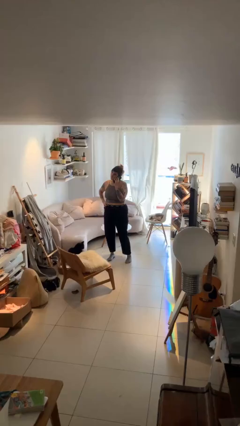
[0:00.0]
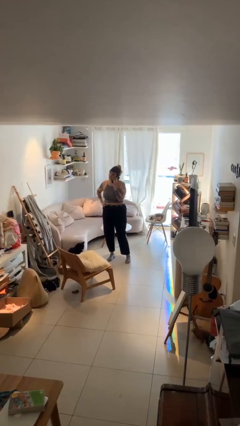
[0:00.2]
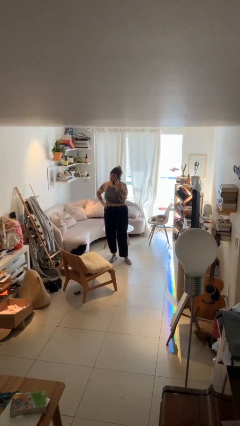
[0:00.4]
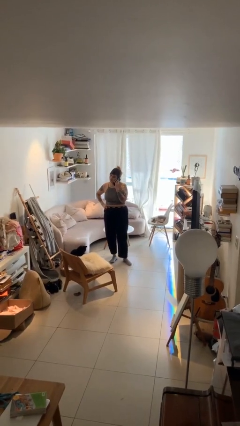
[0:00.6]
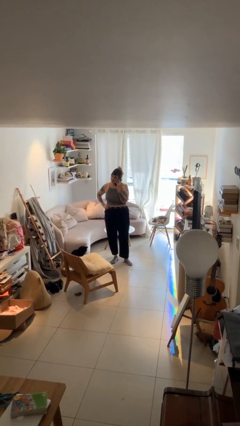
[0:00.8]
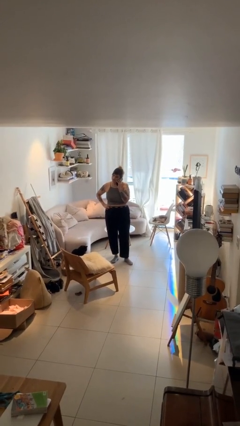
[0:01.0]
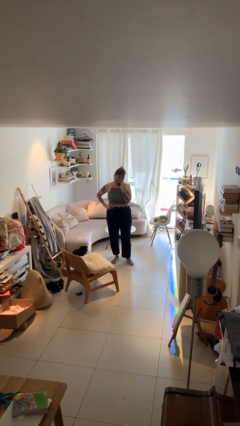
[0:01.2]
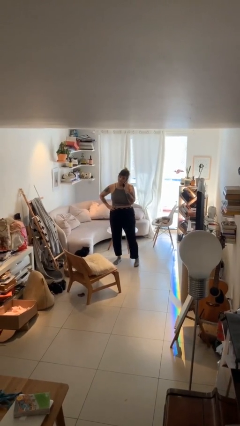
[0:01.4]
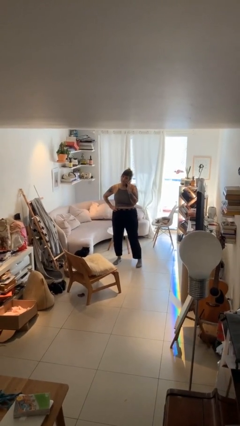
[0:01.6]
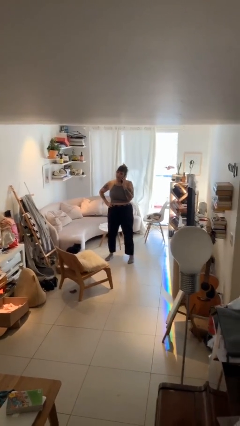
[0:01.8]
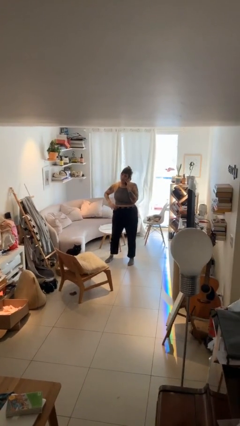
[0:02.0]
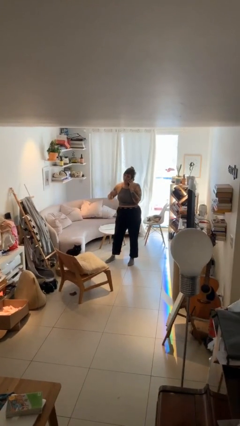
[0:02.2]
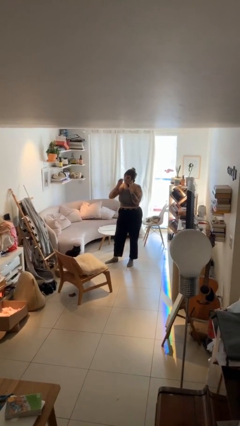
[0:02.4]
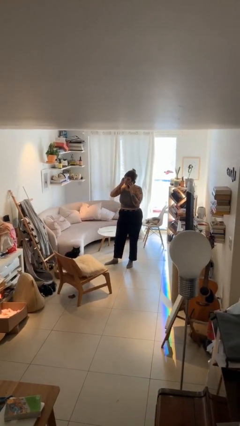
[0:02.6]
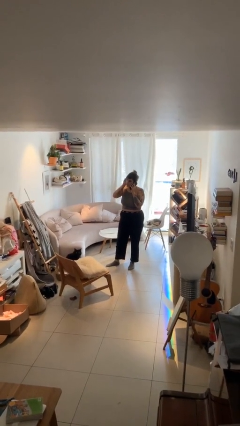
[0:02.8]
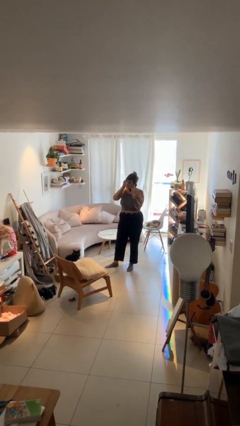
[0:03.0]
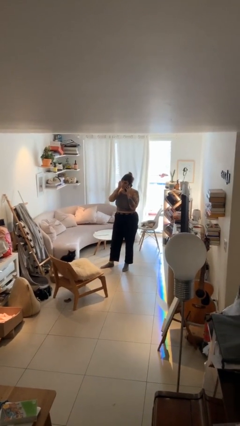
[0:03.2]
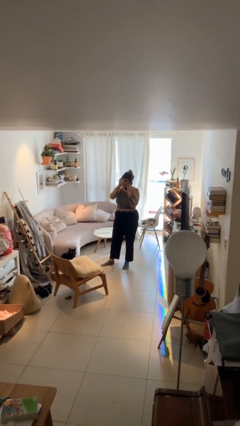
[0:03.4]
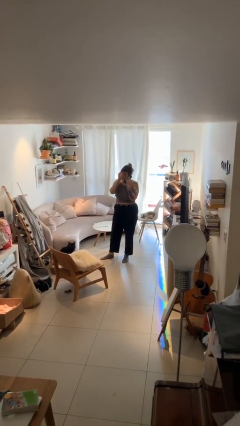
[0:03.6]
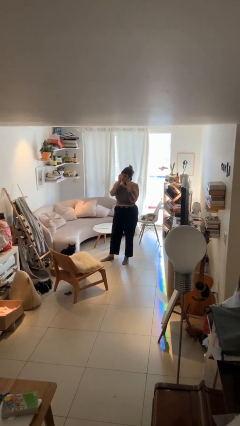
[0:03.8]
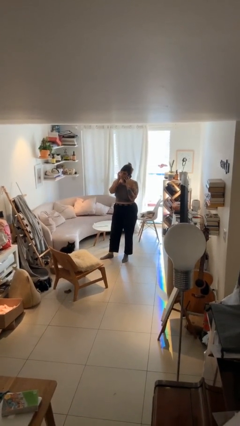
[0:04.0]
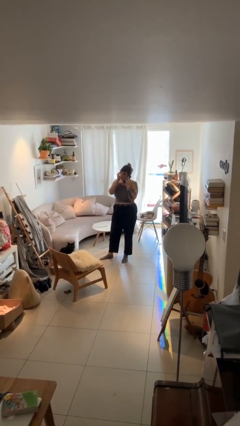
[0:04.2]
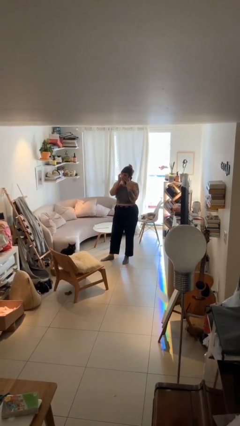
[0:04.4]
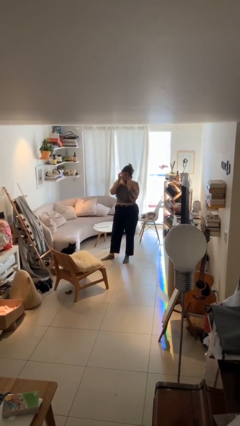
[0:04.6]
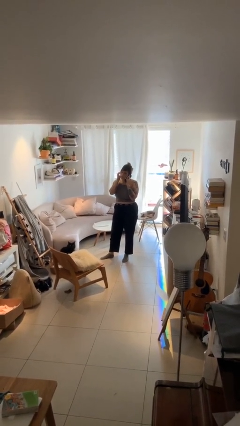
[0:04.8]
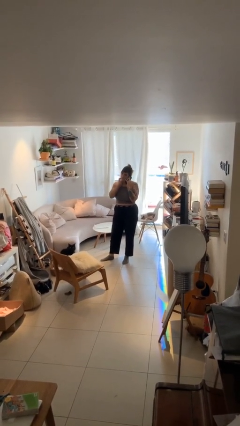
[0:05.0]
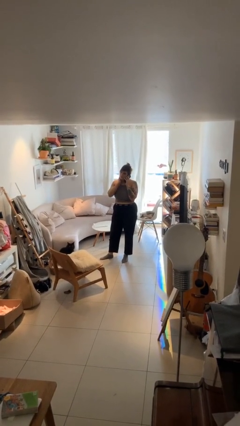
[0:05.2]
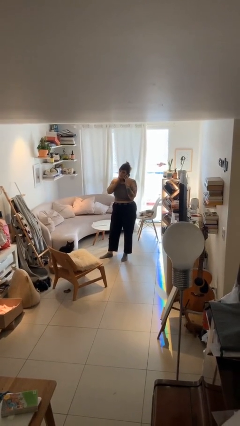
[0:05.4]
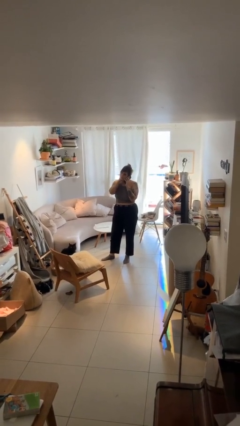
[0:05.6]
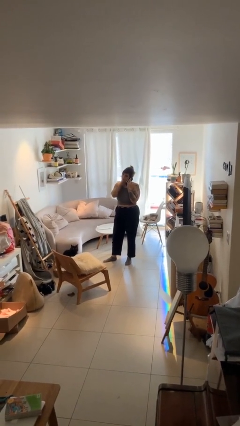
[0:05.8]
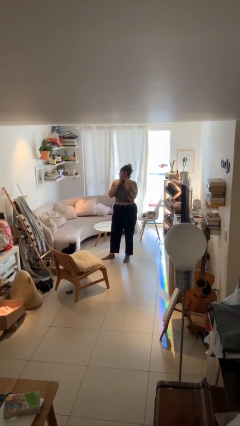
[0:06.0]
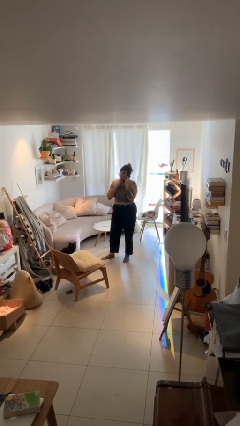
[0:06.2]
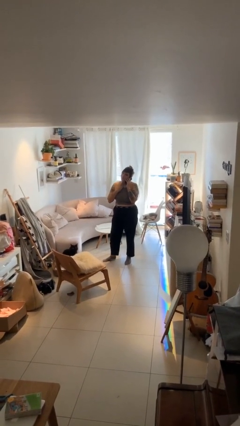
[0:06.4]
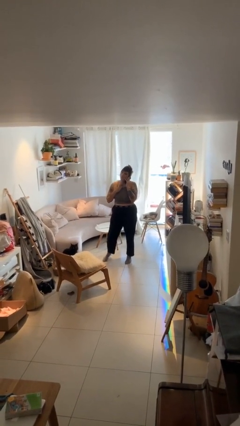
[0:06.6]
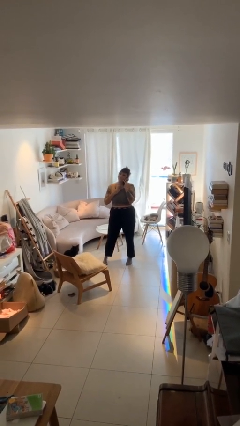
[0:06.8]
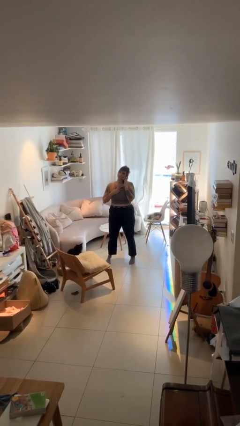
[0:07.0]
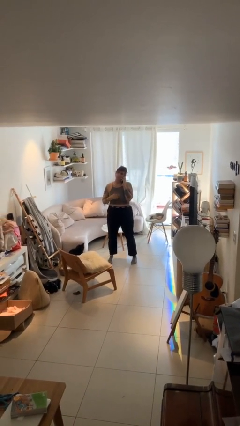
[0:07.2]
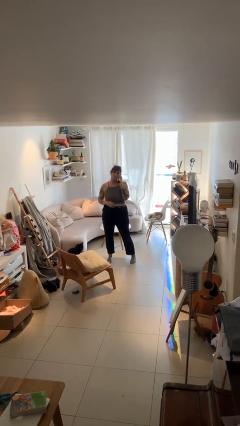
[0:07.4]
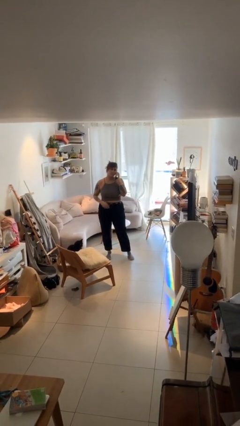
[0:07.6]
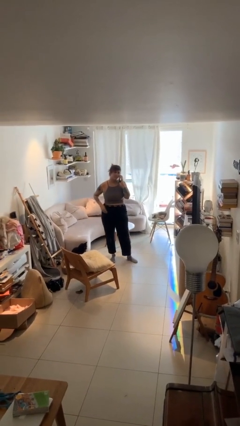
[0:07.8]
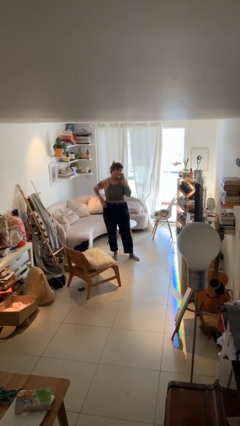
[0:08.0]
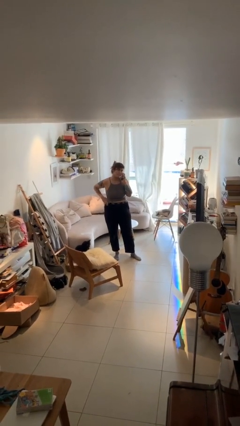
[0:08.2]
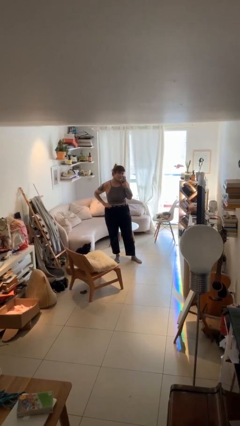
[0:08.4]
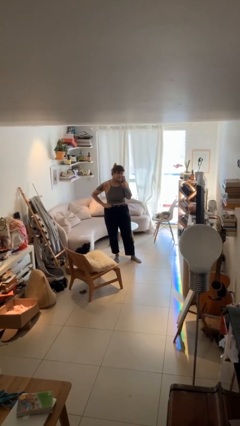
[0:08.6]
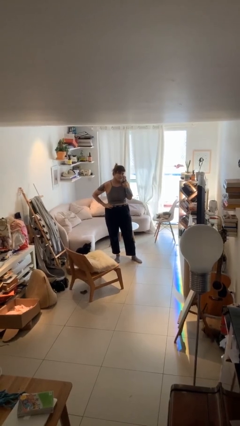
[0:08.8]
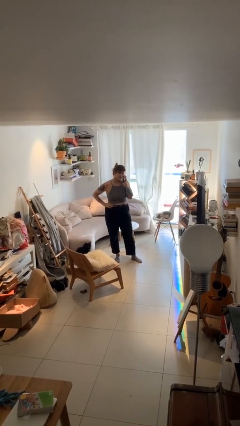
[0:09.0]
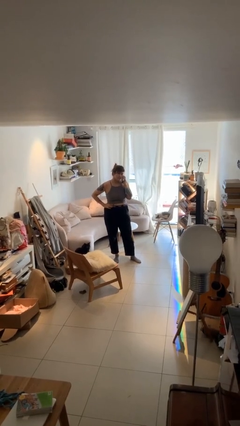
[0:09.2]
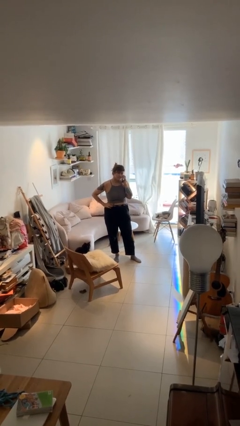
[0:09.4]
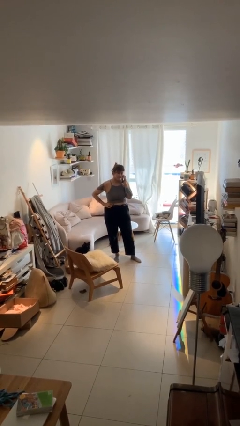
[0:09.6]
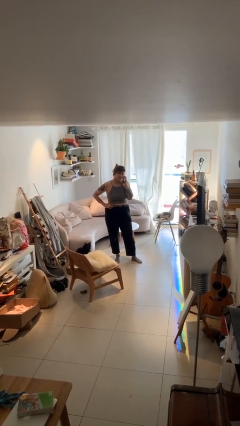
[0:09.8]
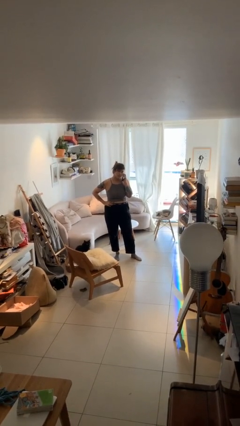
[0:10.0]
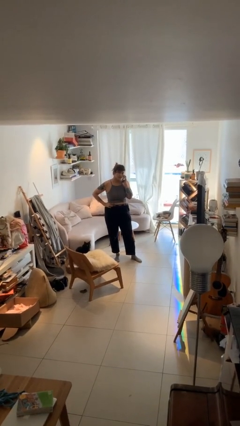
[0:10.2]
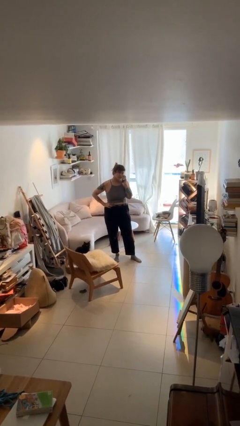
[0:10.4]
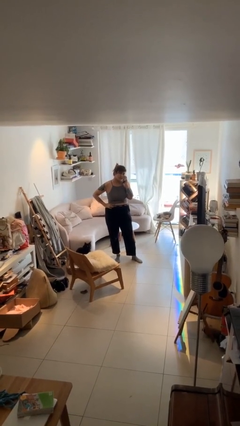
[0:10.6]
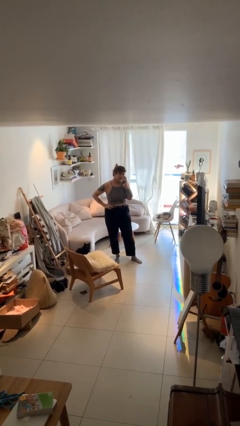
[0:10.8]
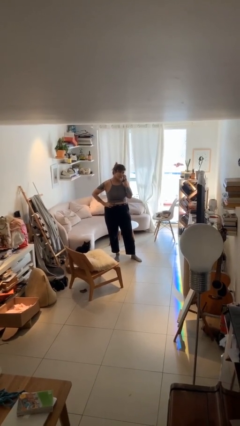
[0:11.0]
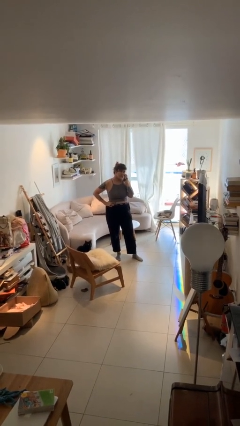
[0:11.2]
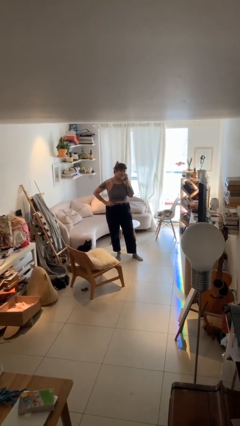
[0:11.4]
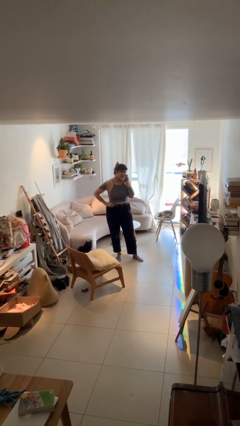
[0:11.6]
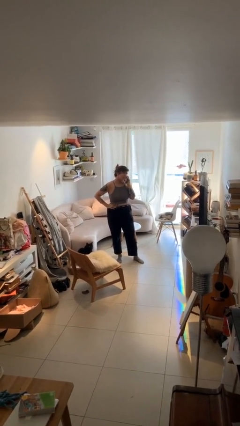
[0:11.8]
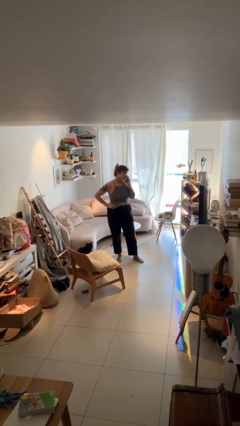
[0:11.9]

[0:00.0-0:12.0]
person talks on phone

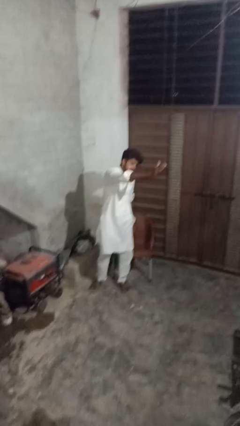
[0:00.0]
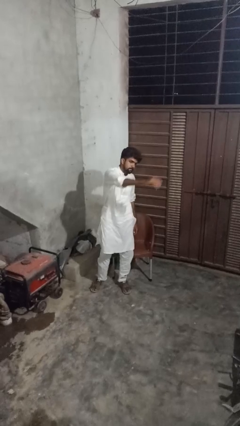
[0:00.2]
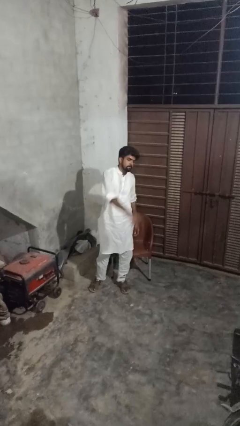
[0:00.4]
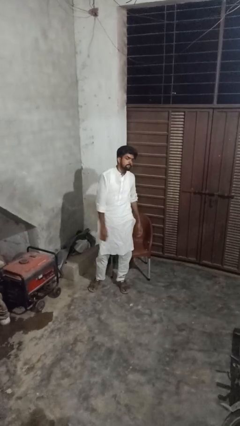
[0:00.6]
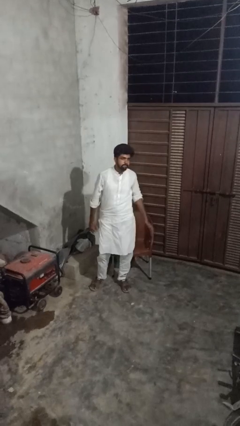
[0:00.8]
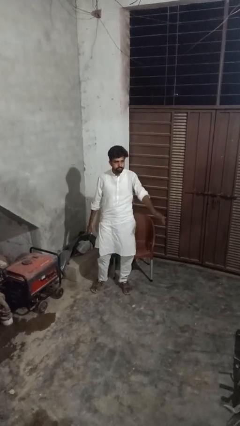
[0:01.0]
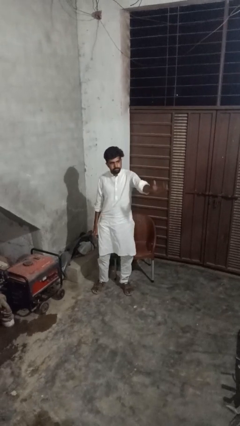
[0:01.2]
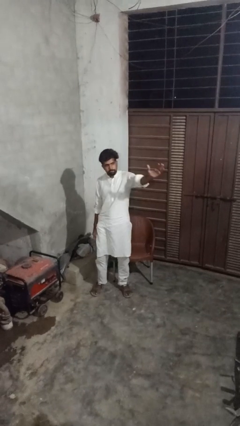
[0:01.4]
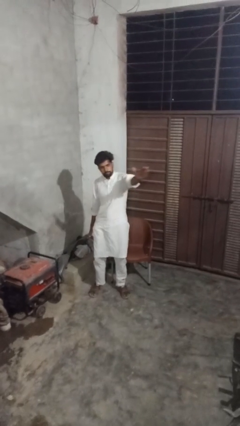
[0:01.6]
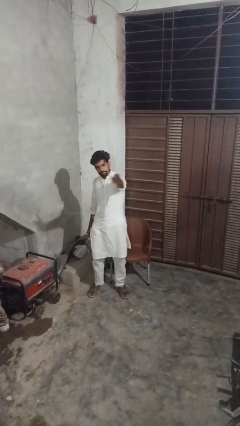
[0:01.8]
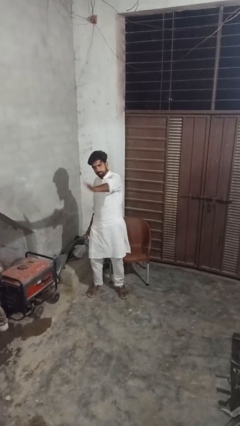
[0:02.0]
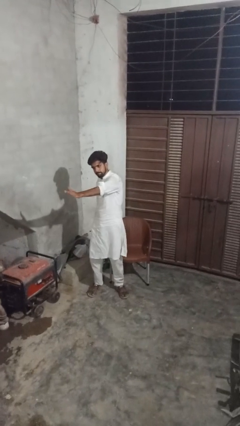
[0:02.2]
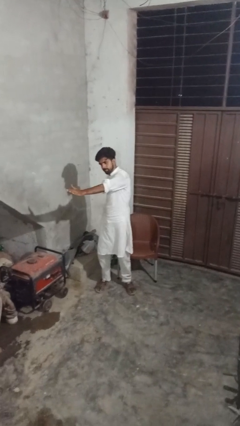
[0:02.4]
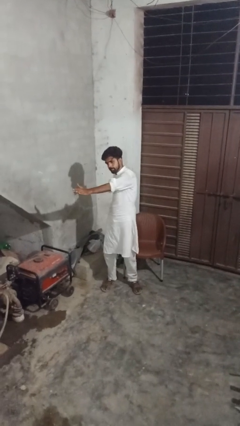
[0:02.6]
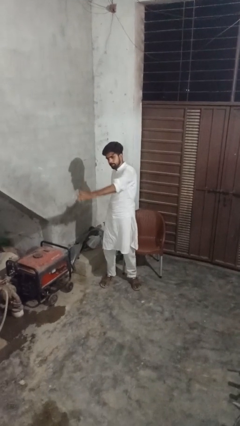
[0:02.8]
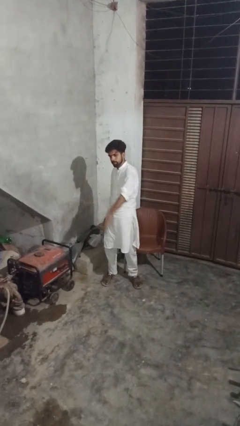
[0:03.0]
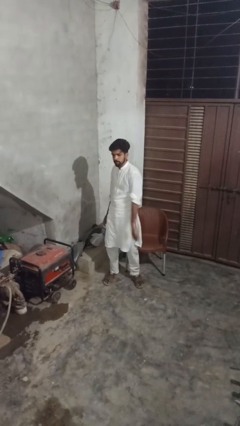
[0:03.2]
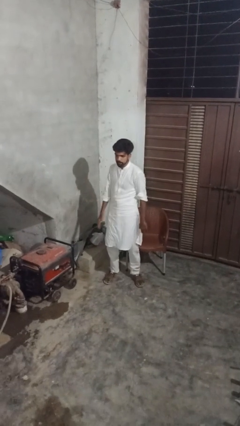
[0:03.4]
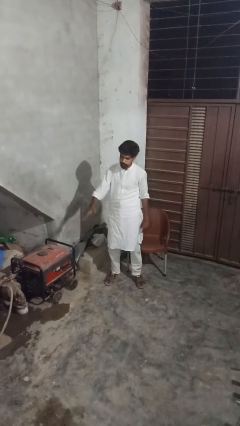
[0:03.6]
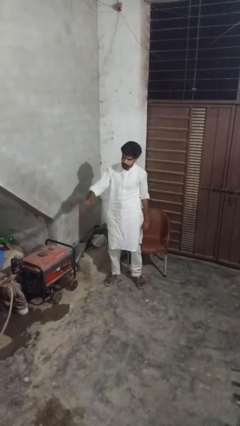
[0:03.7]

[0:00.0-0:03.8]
person gestures swipe right

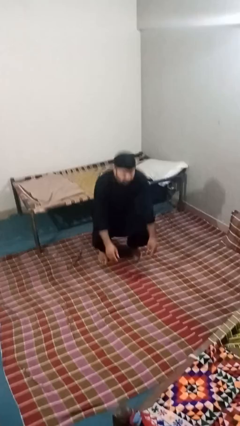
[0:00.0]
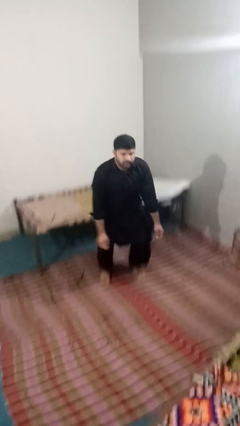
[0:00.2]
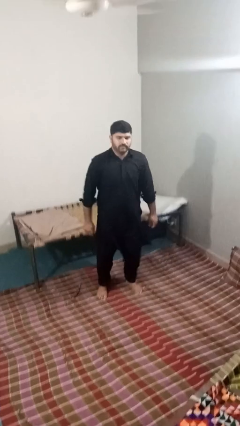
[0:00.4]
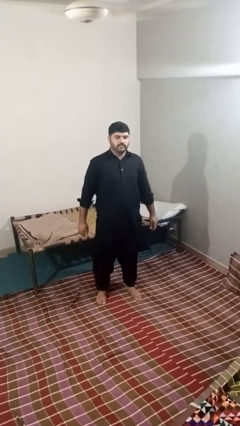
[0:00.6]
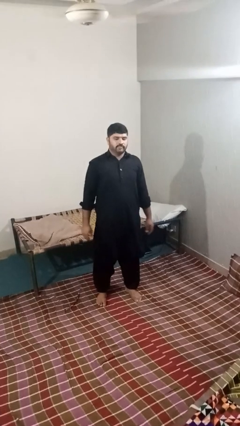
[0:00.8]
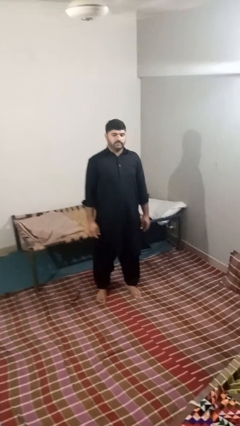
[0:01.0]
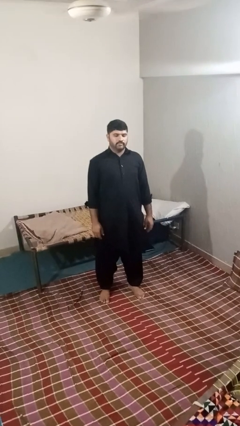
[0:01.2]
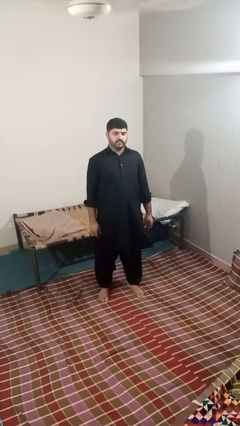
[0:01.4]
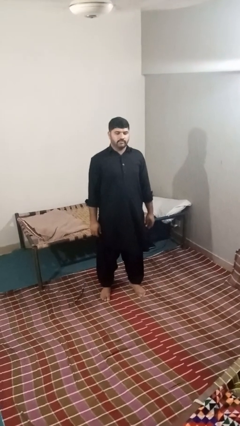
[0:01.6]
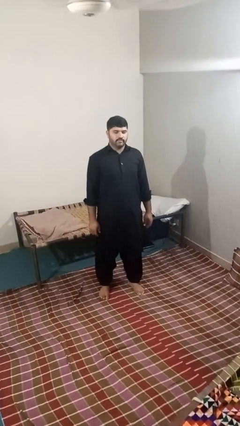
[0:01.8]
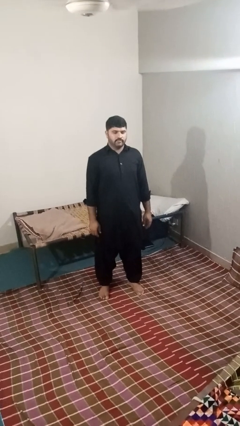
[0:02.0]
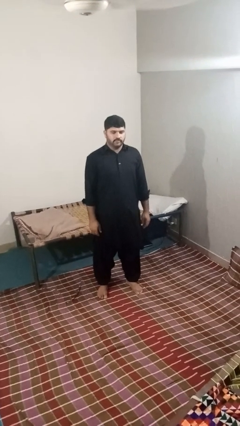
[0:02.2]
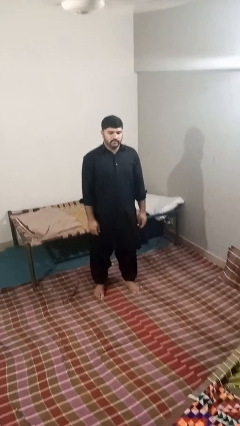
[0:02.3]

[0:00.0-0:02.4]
person squats
